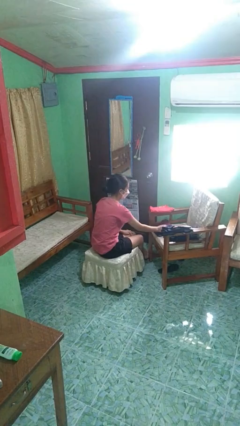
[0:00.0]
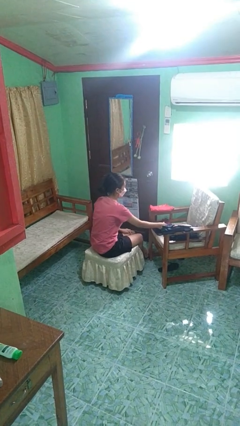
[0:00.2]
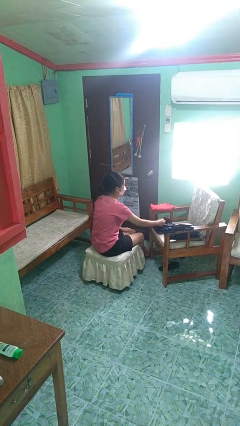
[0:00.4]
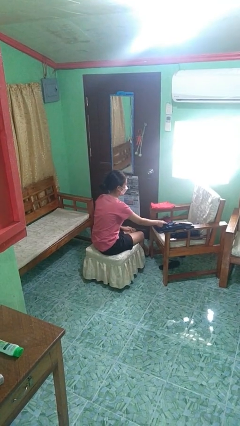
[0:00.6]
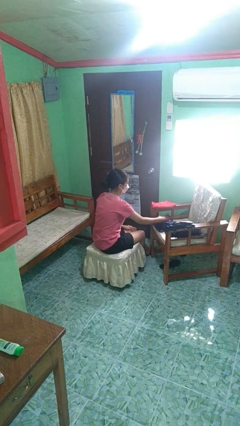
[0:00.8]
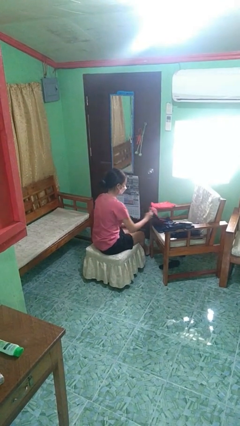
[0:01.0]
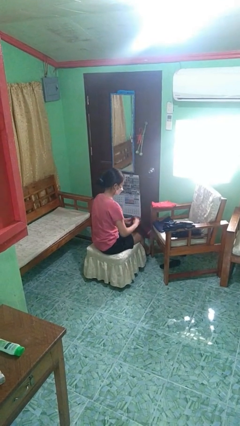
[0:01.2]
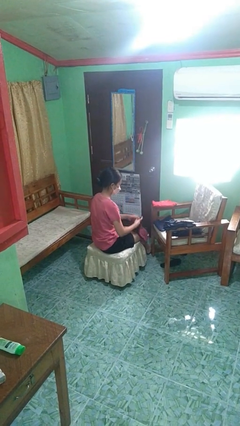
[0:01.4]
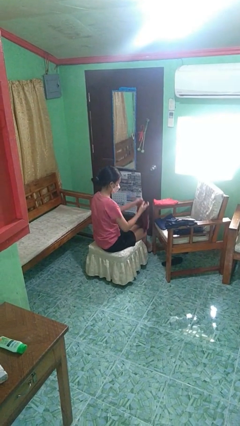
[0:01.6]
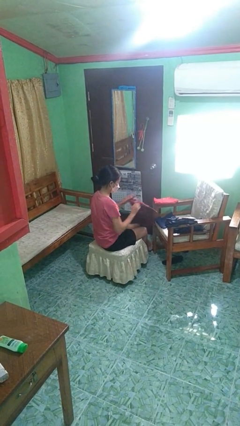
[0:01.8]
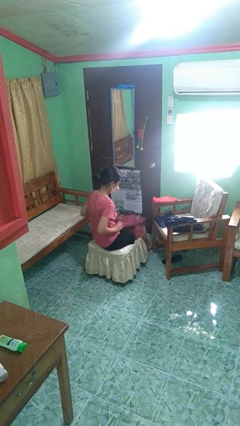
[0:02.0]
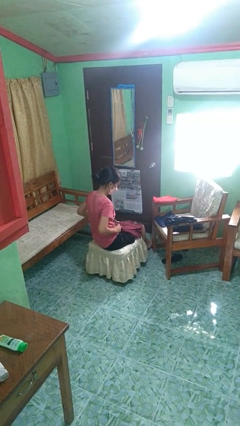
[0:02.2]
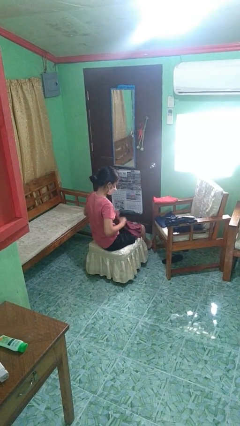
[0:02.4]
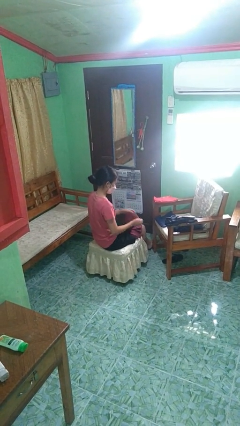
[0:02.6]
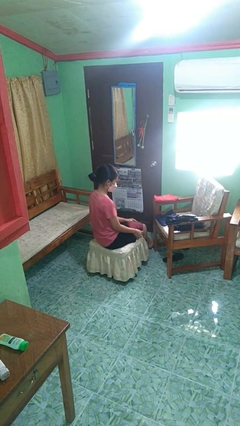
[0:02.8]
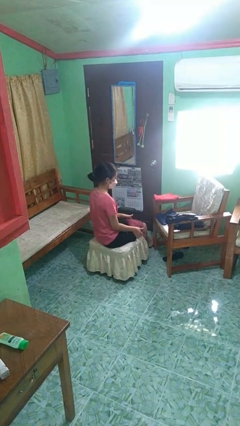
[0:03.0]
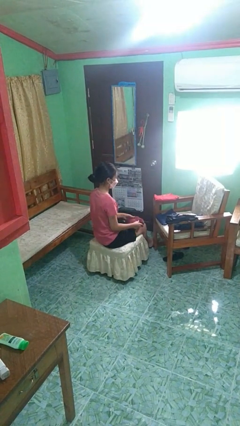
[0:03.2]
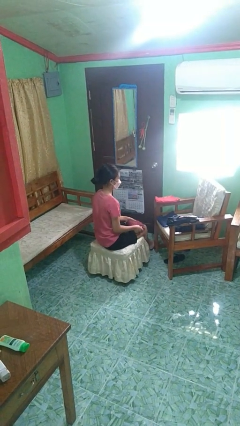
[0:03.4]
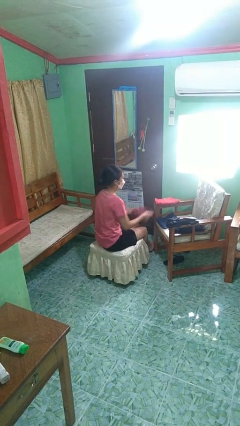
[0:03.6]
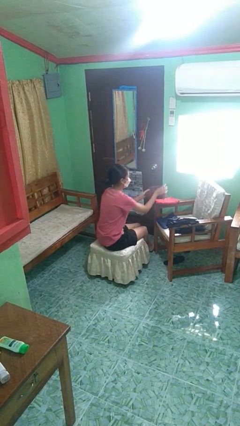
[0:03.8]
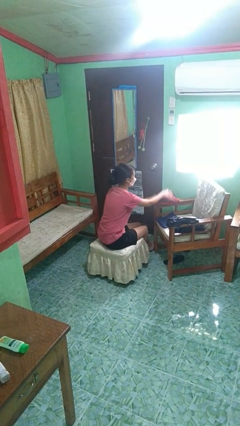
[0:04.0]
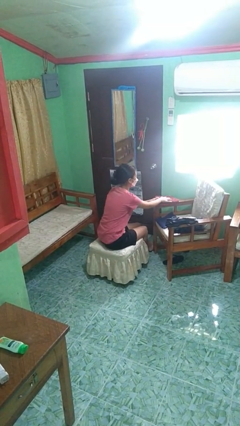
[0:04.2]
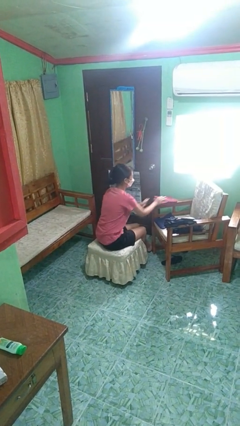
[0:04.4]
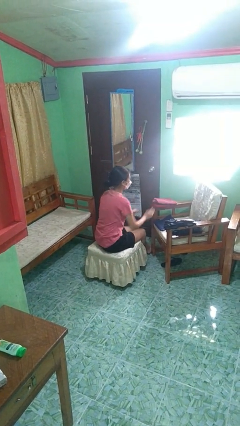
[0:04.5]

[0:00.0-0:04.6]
person folds shirt

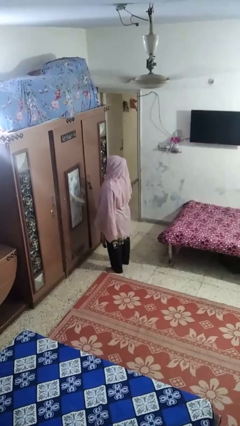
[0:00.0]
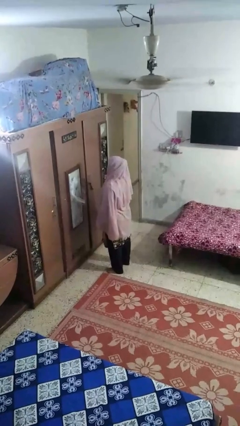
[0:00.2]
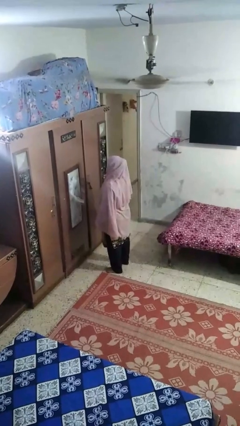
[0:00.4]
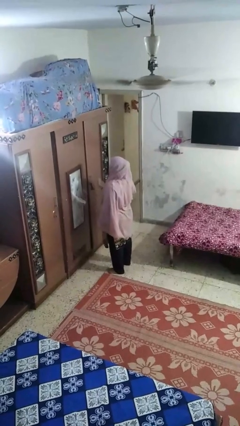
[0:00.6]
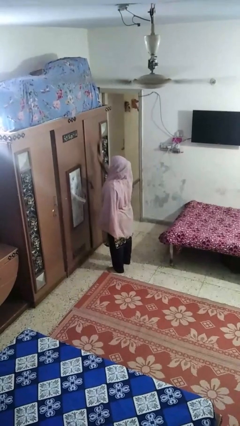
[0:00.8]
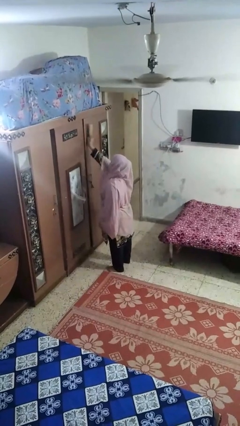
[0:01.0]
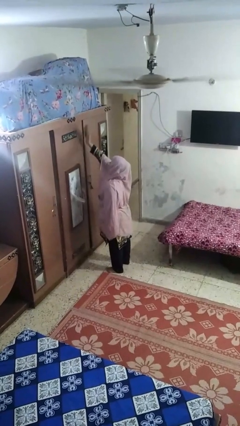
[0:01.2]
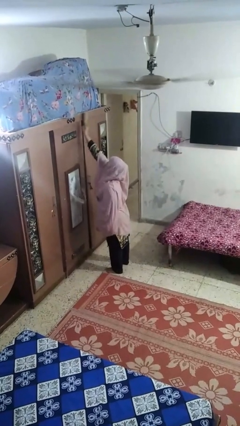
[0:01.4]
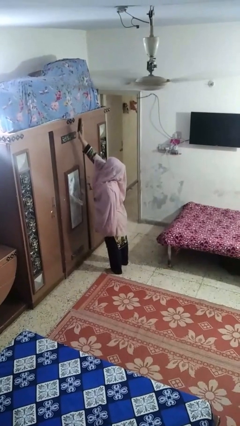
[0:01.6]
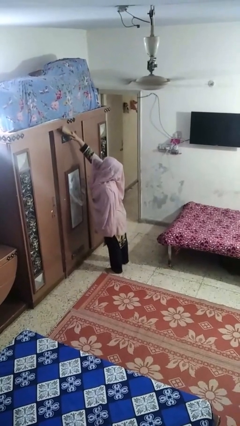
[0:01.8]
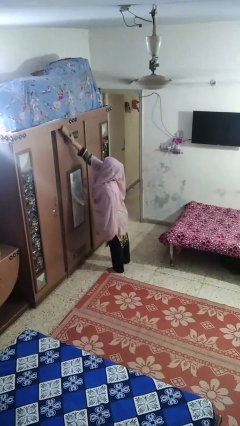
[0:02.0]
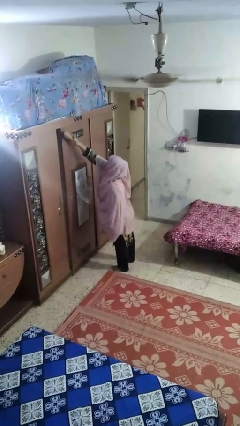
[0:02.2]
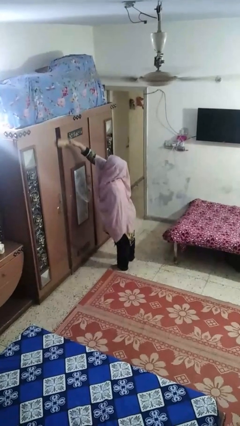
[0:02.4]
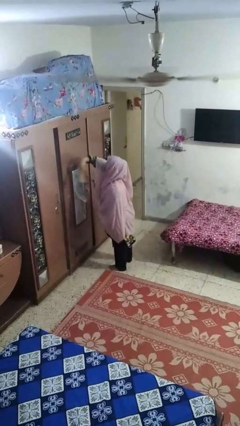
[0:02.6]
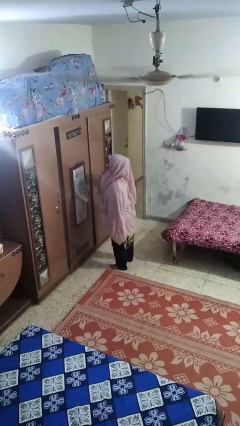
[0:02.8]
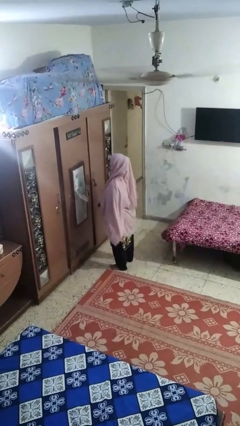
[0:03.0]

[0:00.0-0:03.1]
person dusts furniture

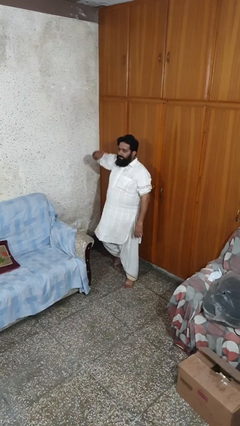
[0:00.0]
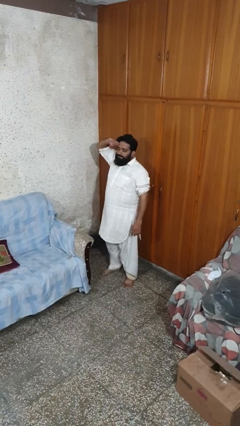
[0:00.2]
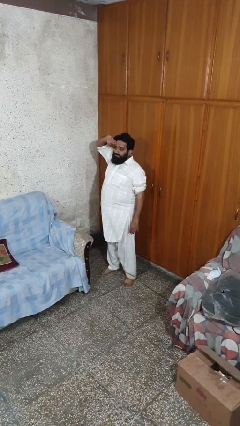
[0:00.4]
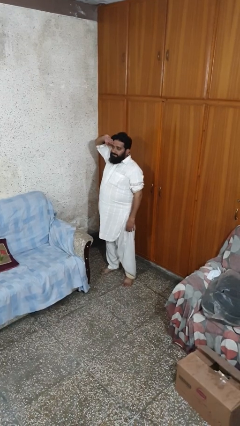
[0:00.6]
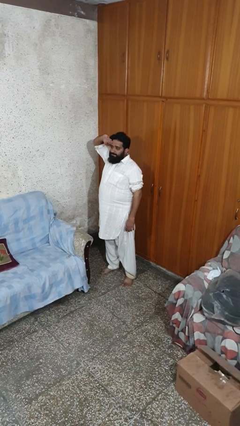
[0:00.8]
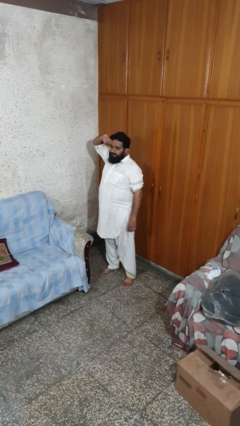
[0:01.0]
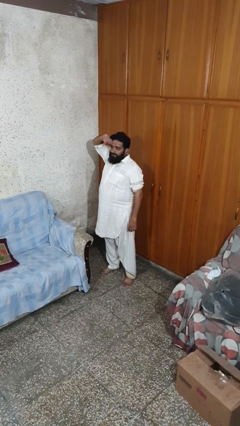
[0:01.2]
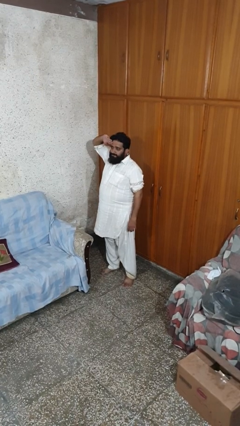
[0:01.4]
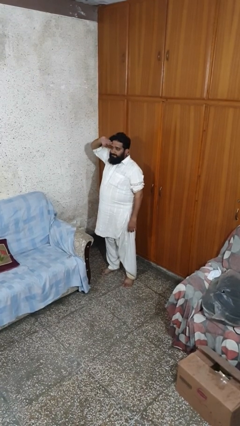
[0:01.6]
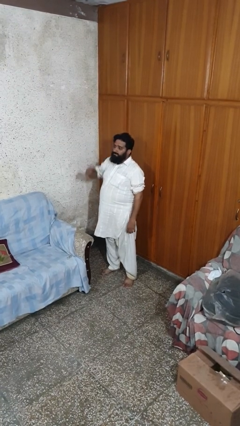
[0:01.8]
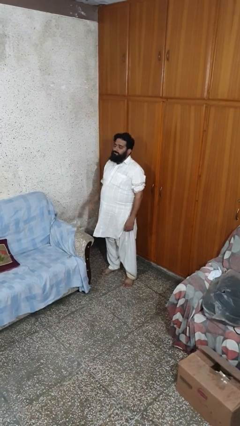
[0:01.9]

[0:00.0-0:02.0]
person salutes

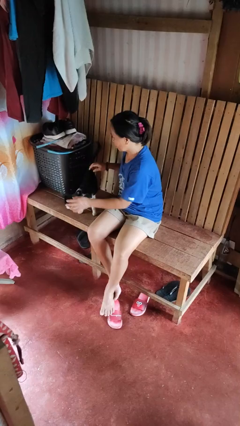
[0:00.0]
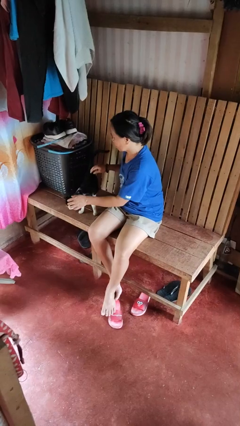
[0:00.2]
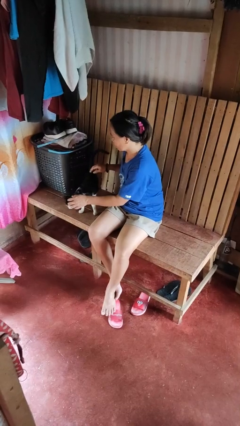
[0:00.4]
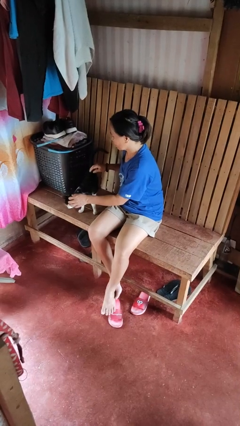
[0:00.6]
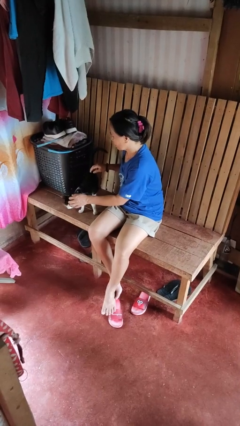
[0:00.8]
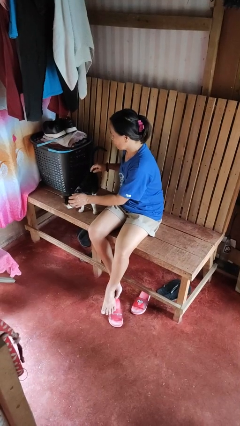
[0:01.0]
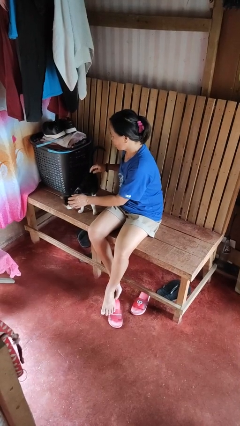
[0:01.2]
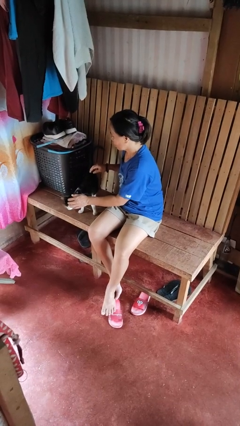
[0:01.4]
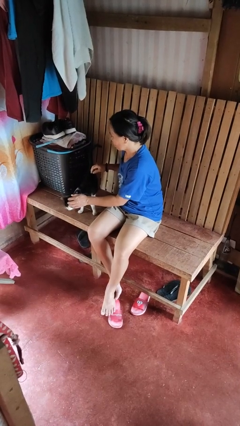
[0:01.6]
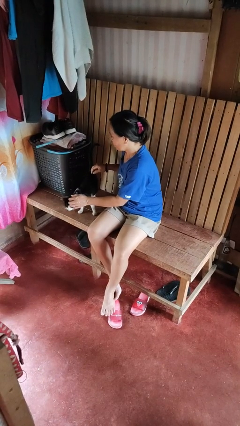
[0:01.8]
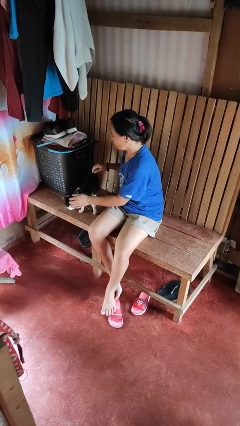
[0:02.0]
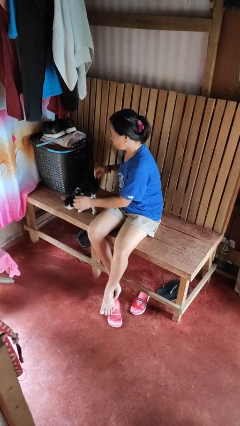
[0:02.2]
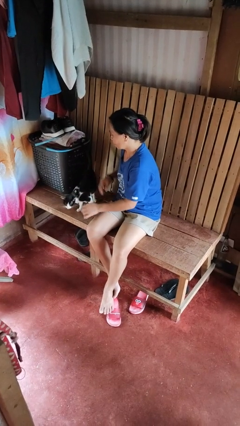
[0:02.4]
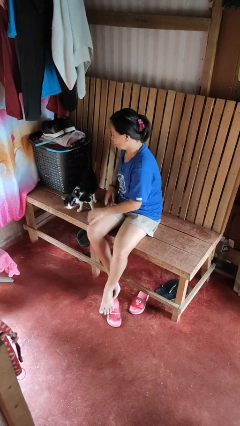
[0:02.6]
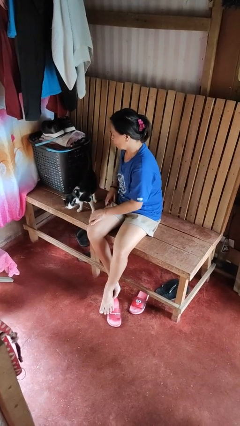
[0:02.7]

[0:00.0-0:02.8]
person pets cat

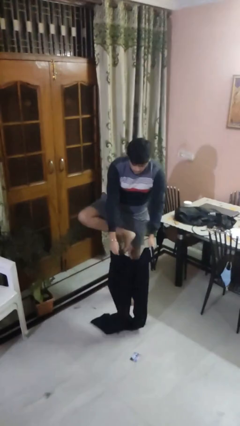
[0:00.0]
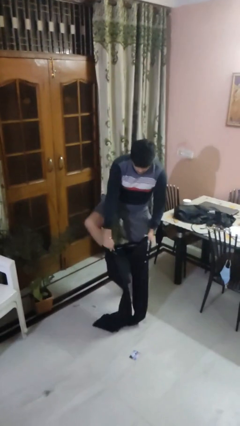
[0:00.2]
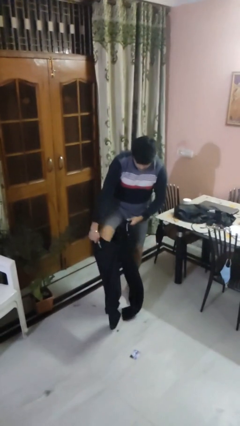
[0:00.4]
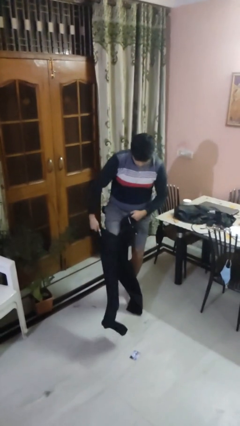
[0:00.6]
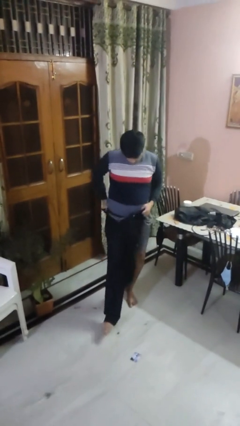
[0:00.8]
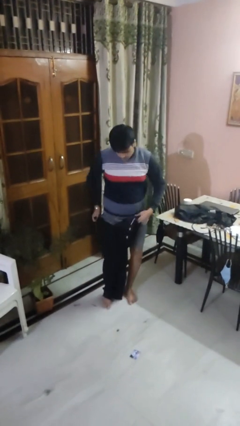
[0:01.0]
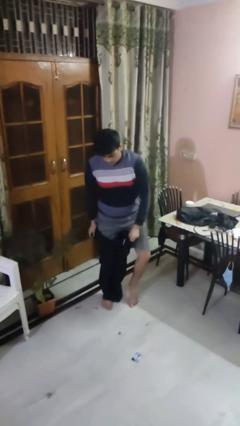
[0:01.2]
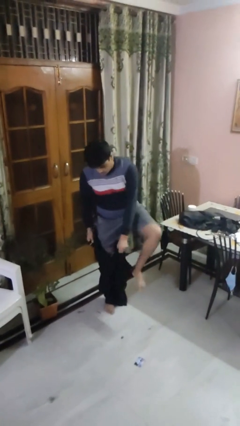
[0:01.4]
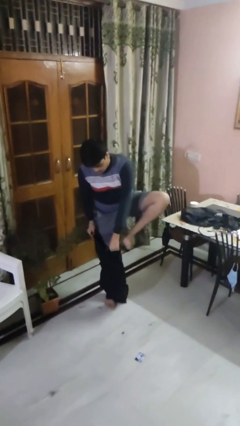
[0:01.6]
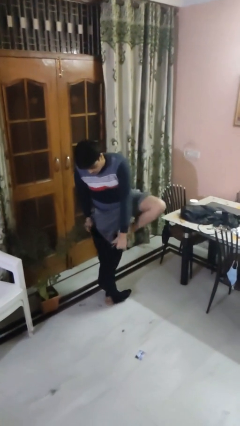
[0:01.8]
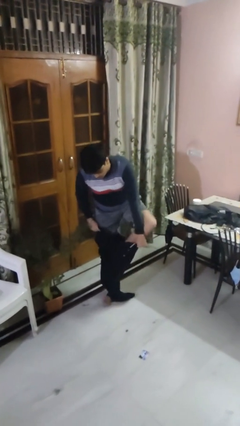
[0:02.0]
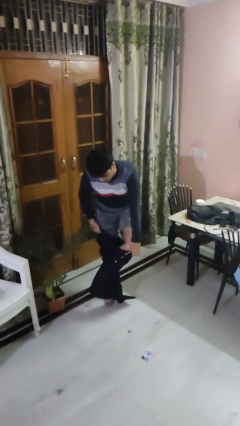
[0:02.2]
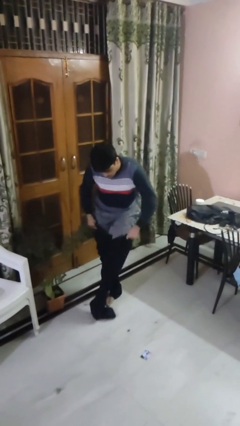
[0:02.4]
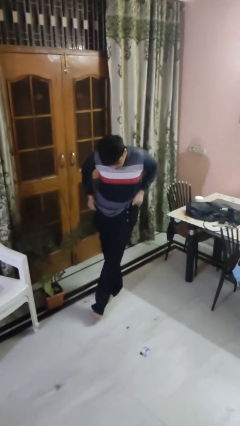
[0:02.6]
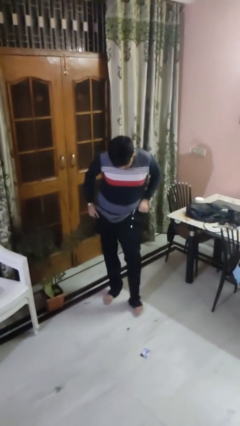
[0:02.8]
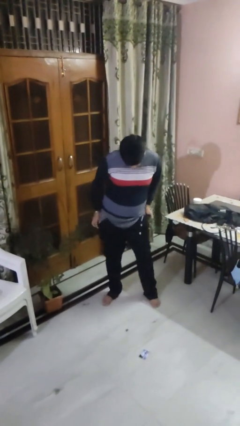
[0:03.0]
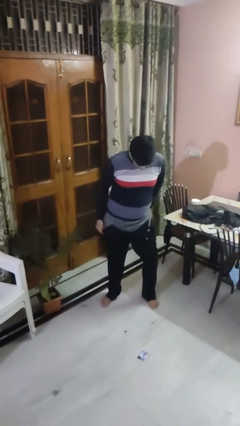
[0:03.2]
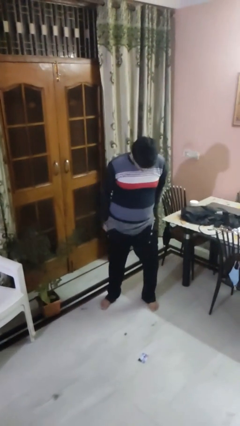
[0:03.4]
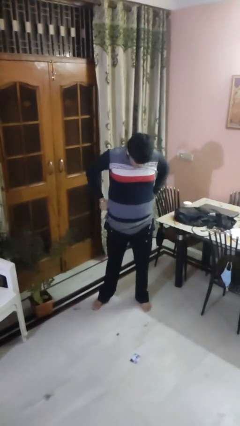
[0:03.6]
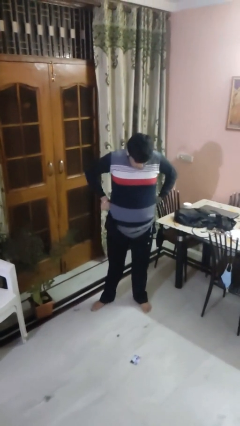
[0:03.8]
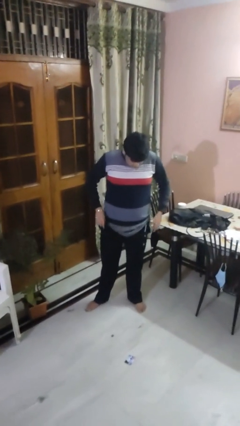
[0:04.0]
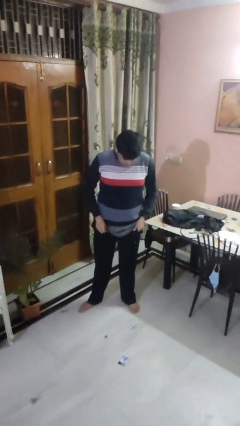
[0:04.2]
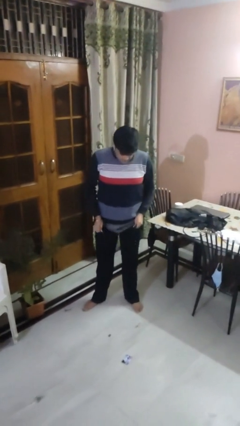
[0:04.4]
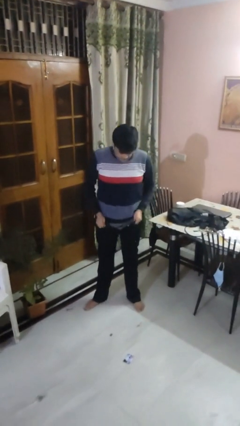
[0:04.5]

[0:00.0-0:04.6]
person puts on pants
